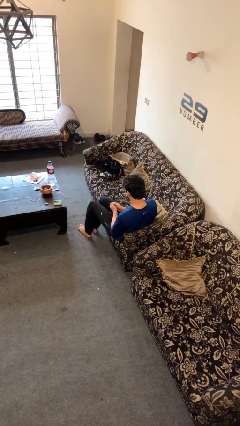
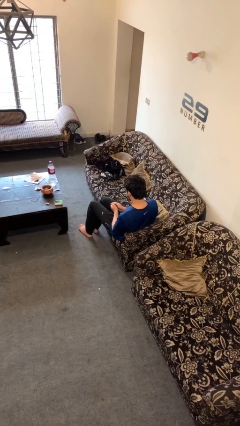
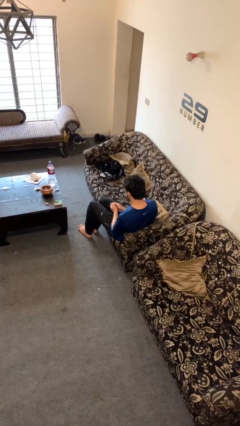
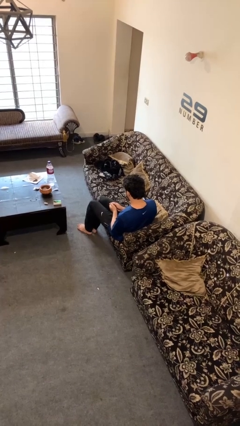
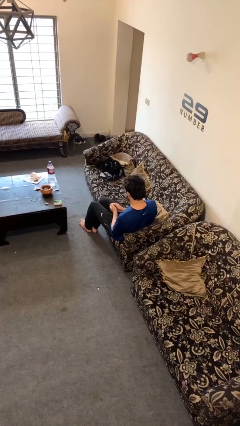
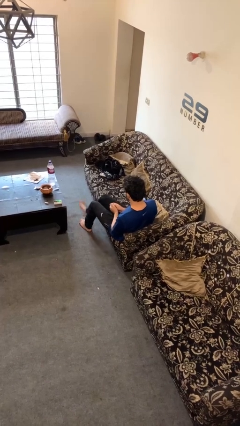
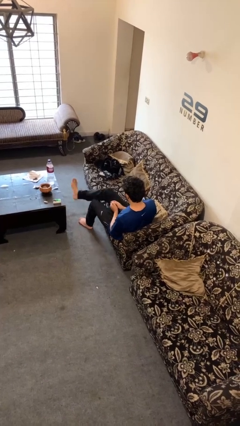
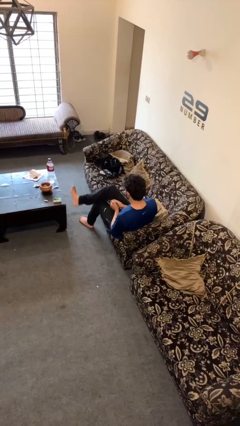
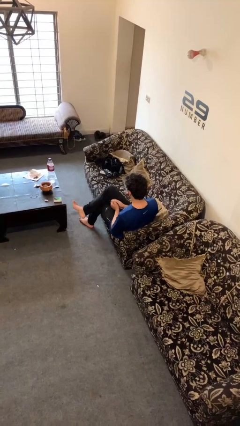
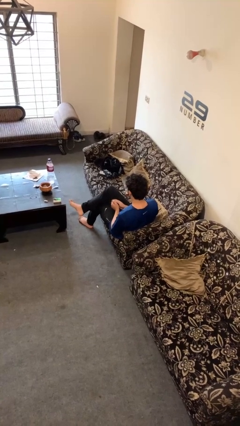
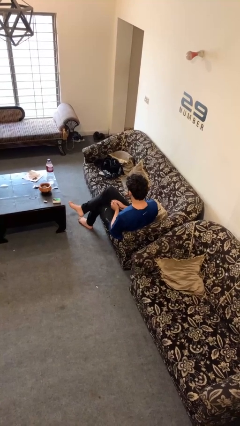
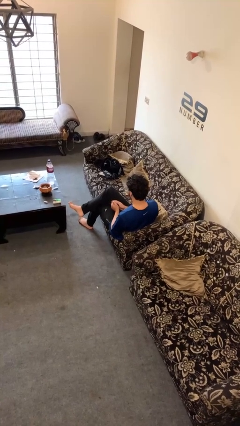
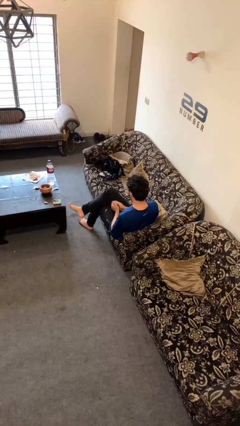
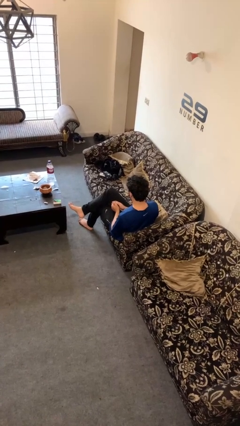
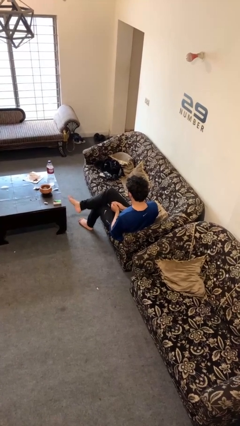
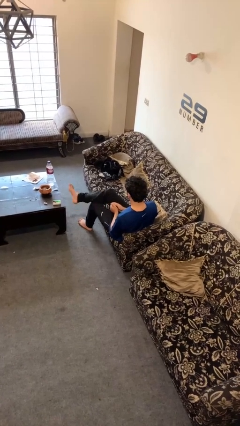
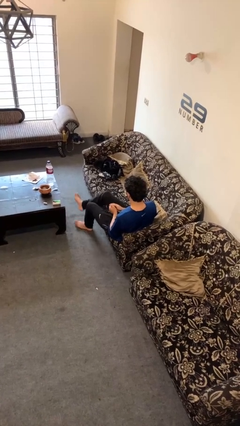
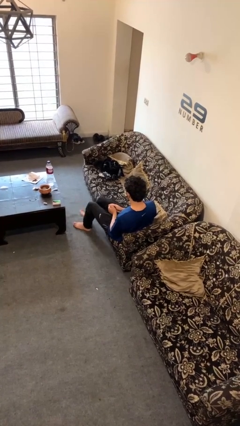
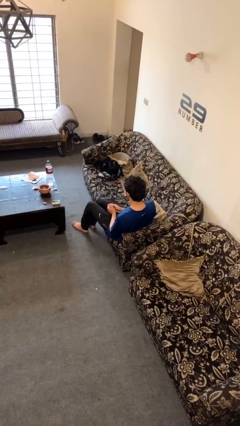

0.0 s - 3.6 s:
person crosses legs

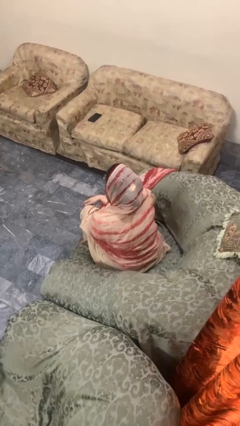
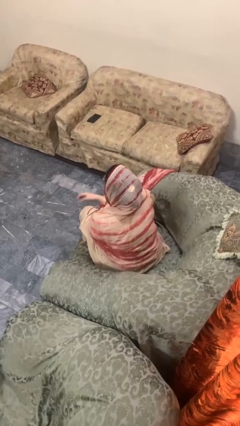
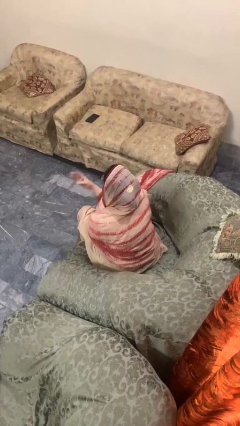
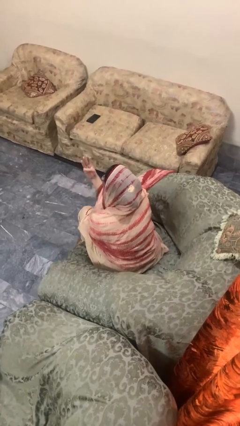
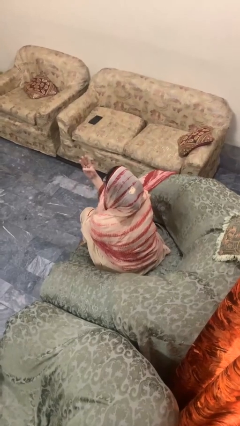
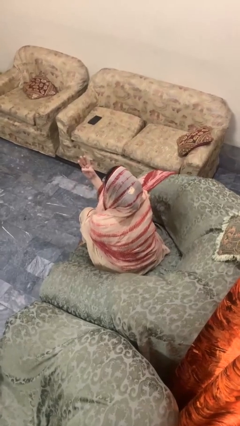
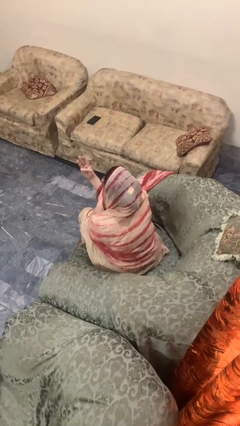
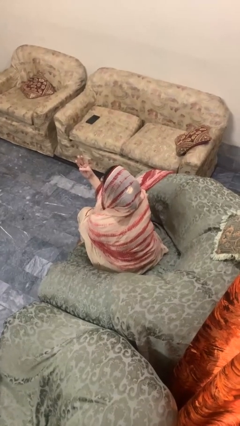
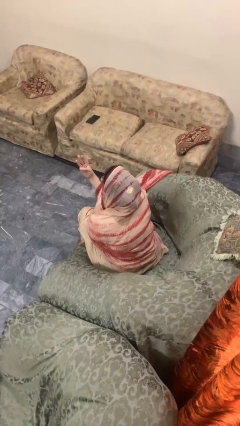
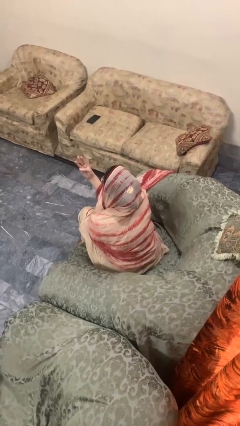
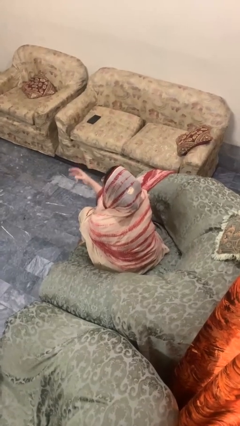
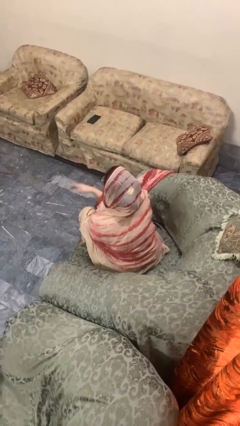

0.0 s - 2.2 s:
person gestures number three

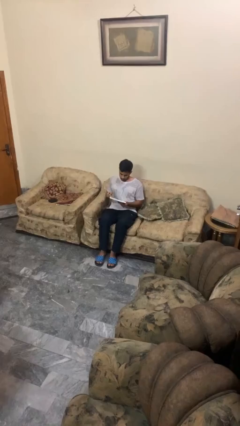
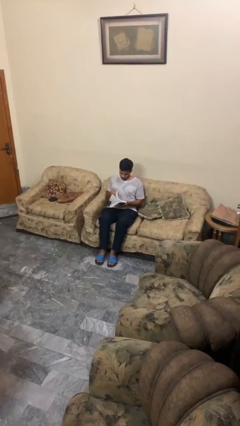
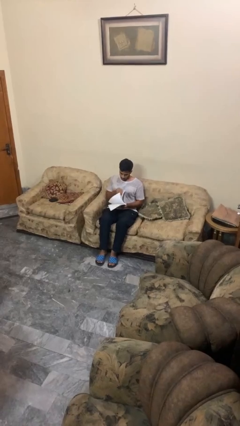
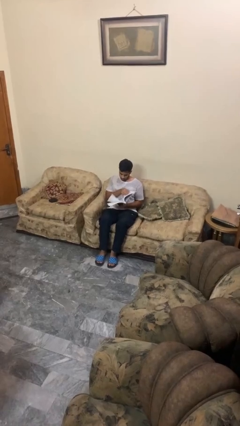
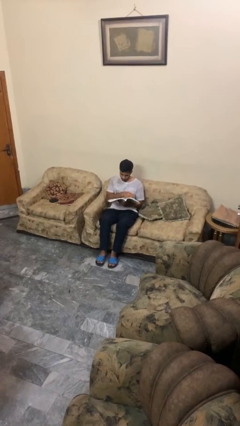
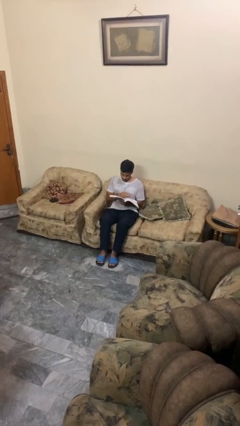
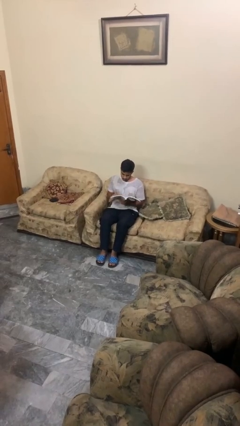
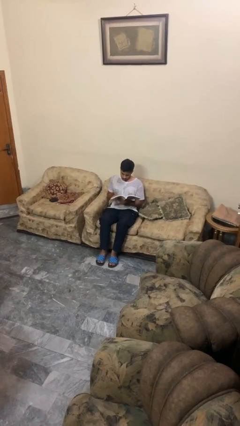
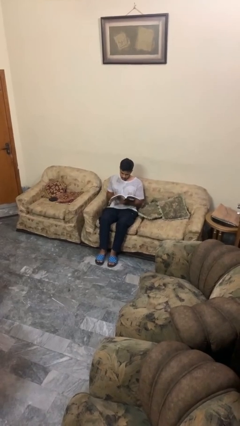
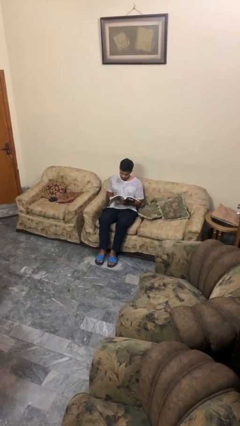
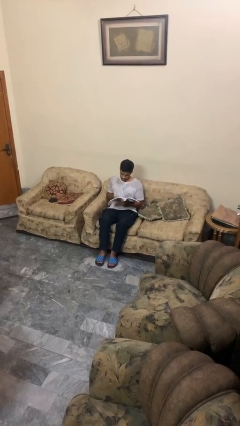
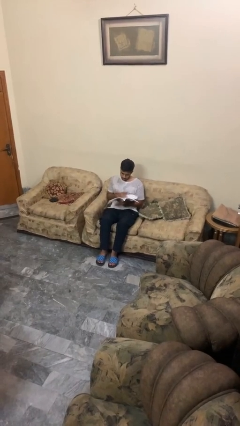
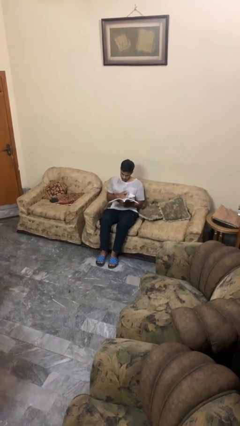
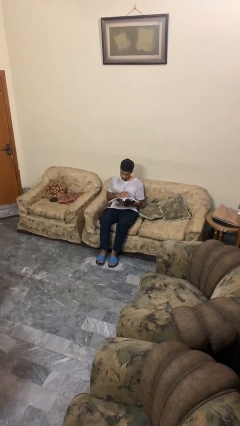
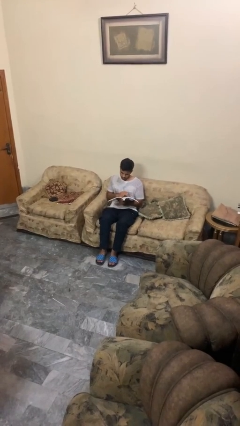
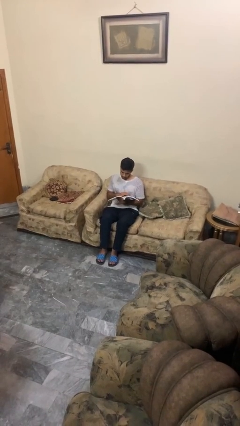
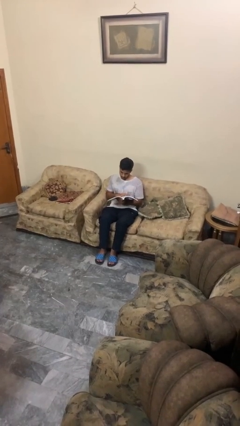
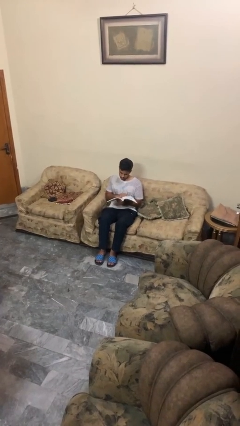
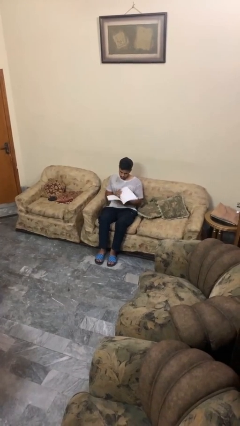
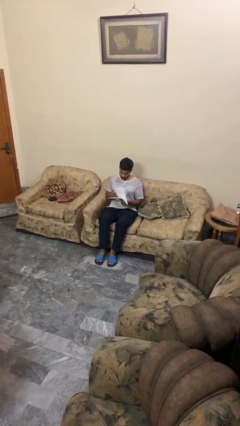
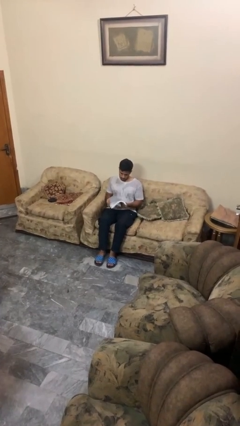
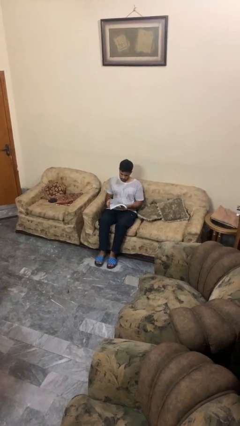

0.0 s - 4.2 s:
person reads book

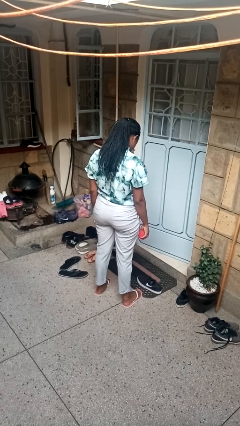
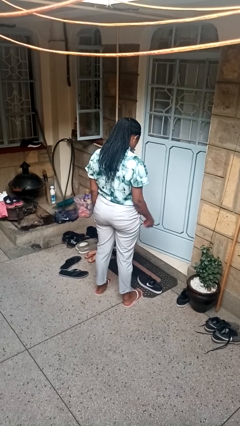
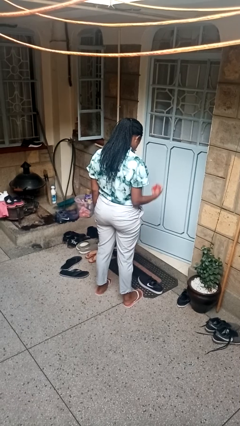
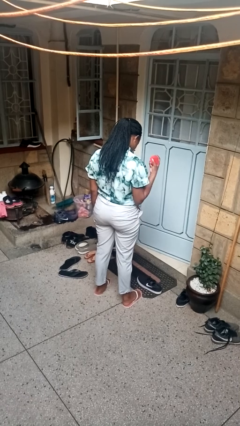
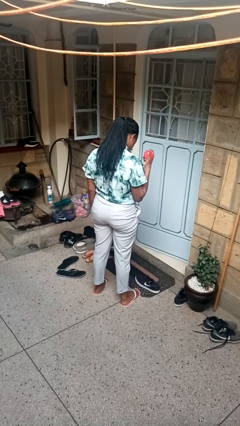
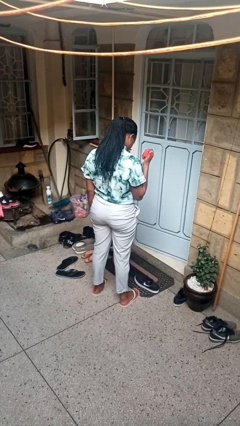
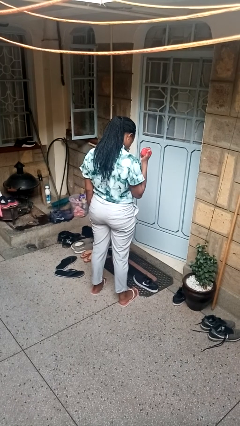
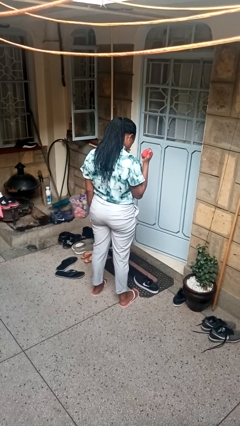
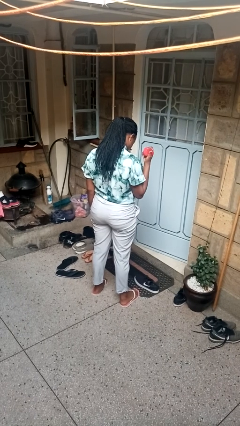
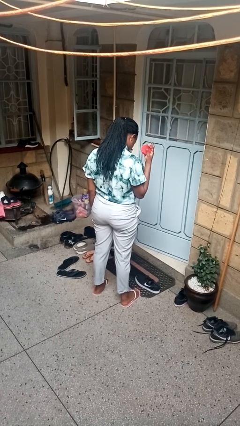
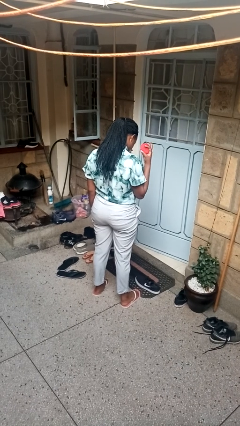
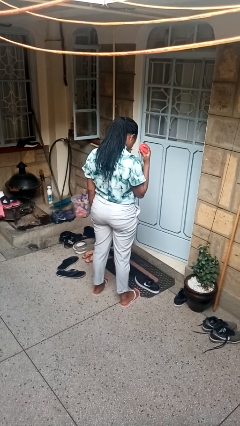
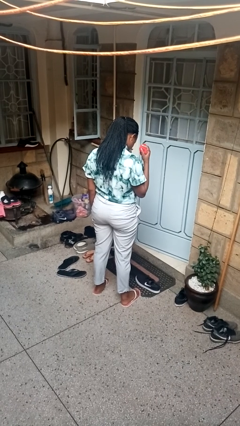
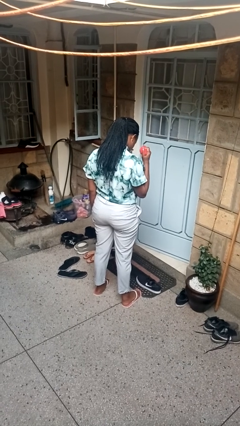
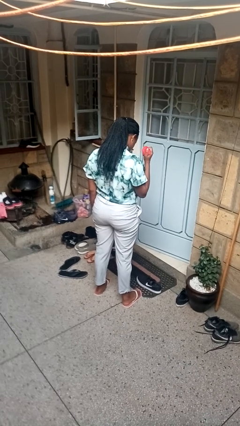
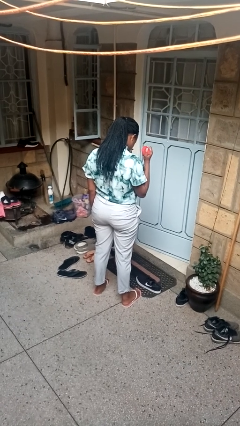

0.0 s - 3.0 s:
person squeezes object

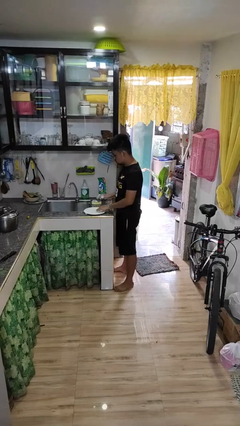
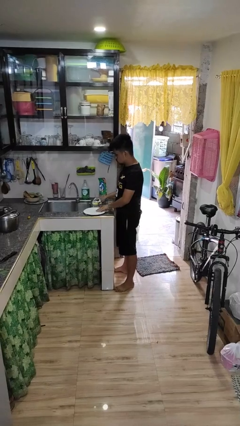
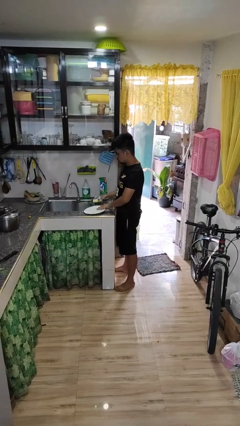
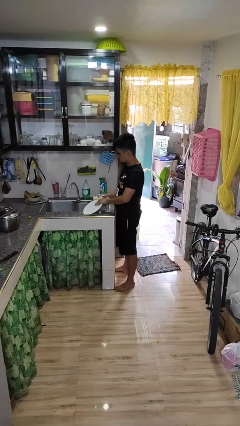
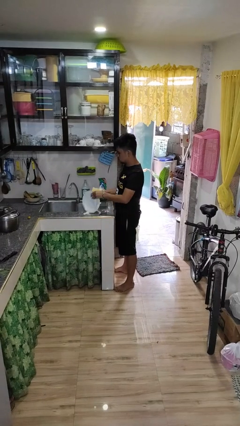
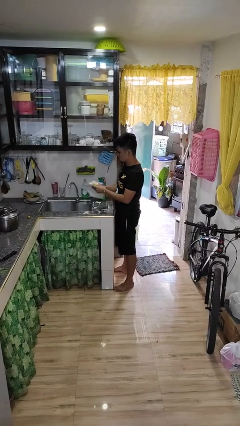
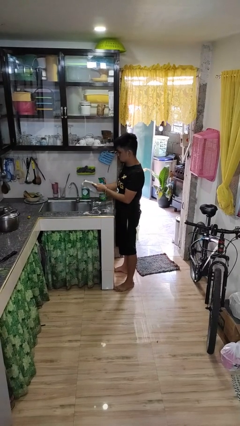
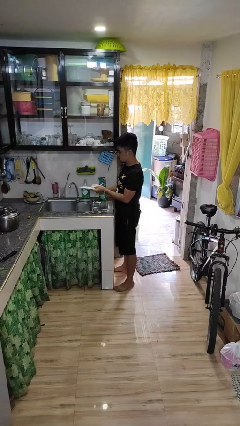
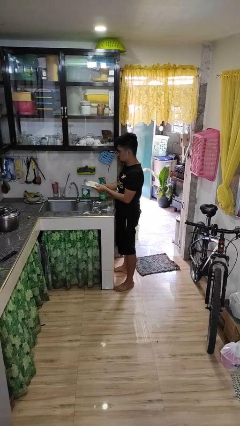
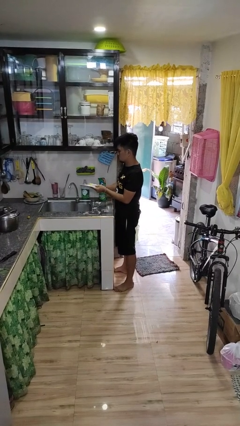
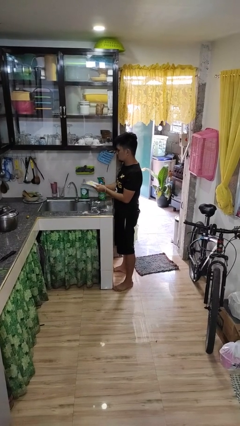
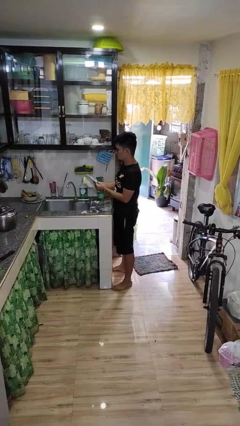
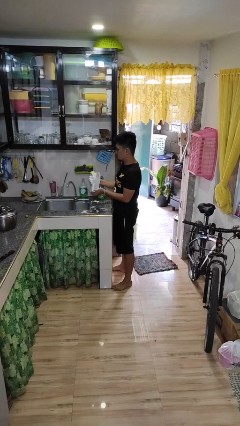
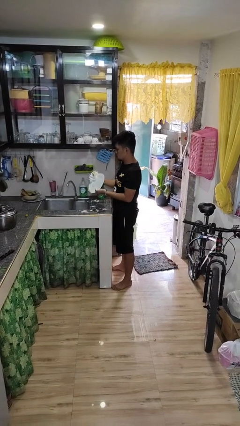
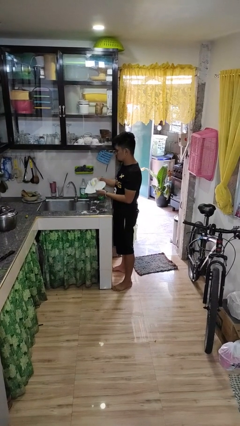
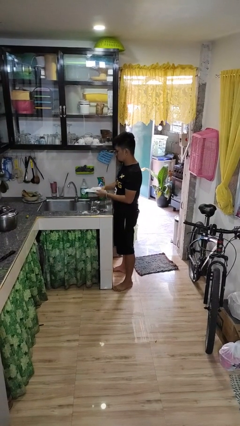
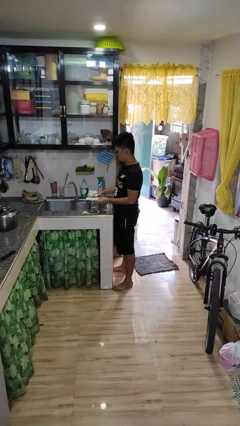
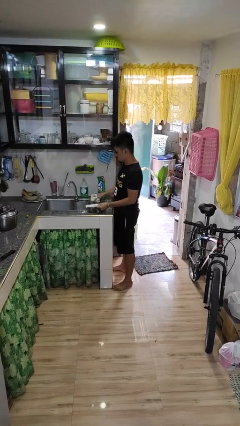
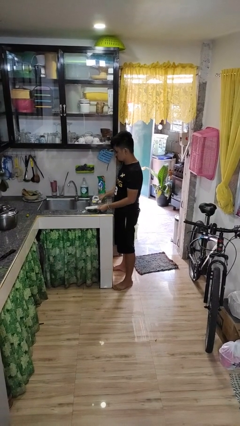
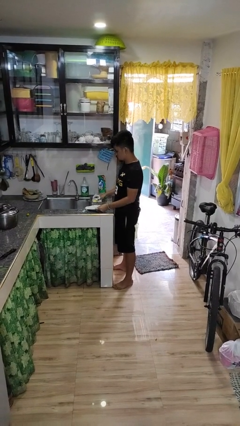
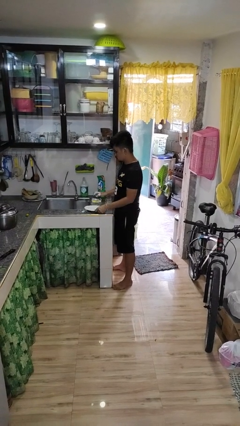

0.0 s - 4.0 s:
person washes dish

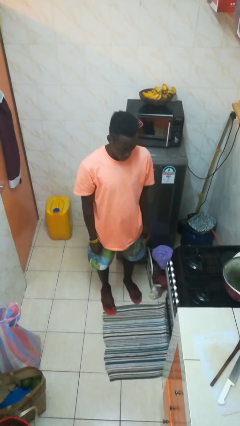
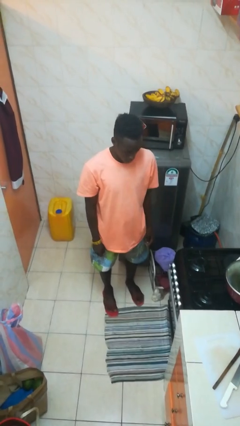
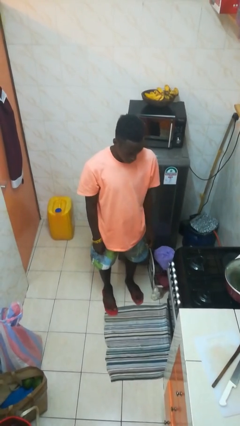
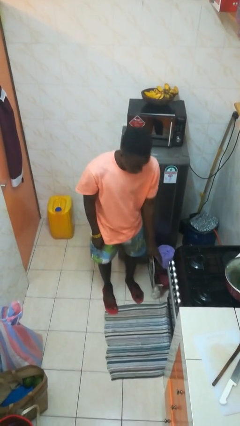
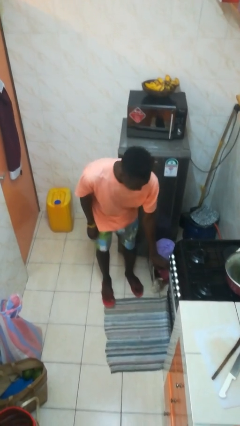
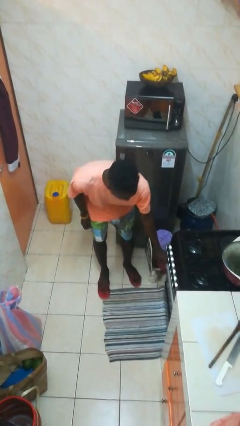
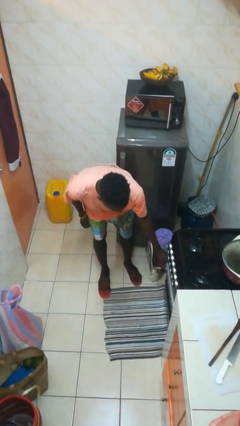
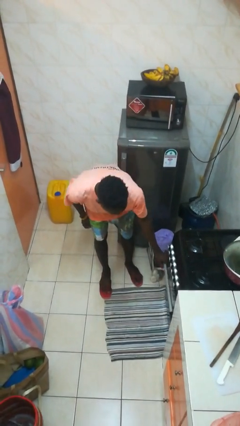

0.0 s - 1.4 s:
person opens oven door
